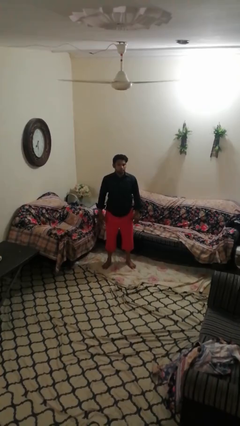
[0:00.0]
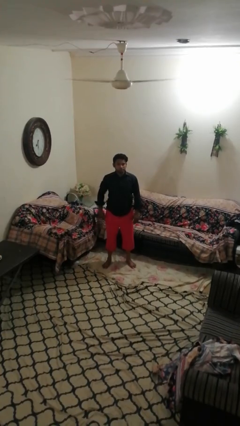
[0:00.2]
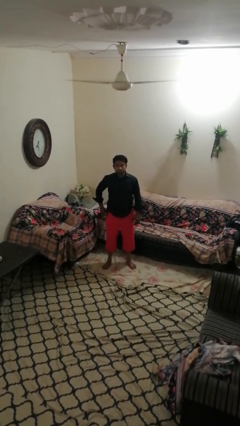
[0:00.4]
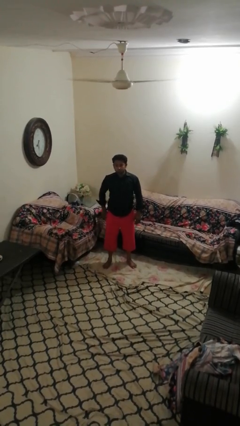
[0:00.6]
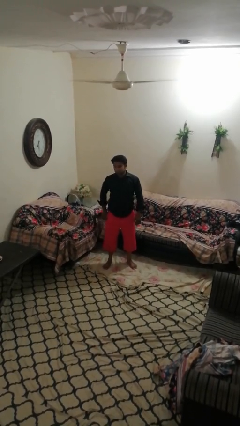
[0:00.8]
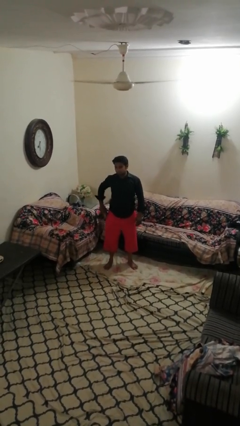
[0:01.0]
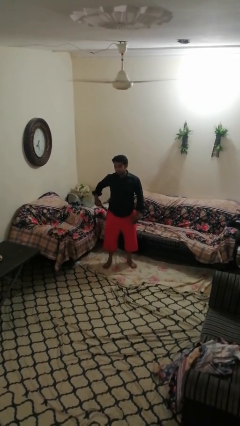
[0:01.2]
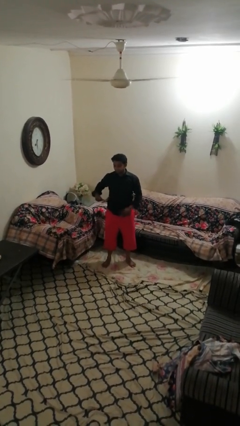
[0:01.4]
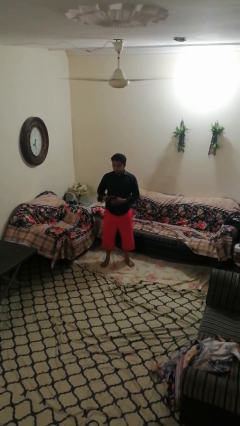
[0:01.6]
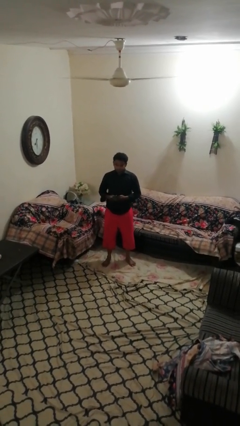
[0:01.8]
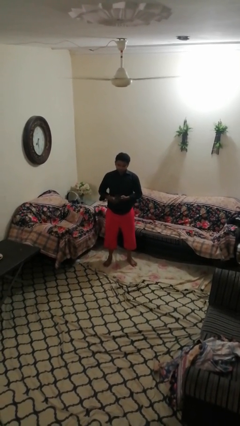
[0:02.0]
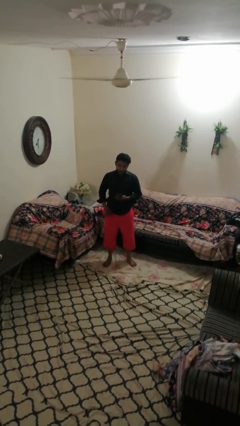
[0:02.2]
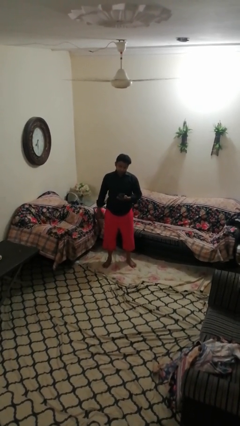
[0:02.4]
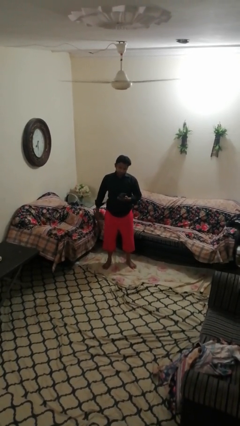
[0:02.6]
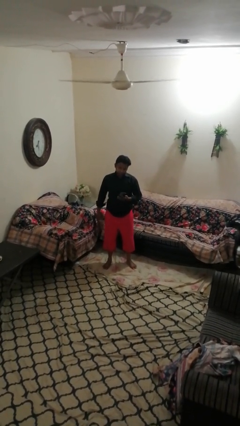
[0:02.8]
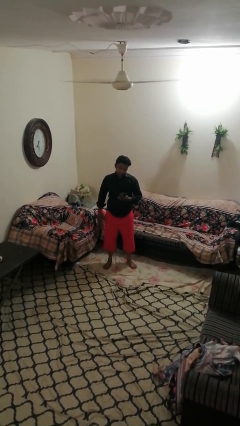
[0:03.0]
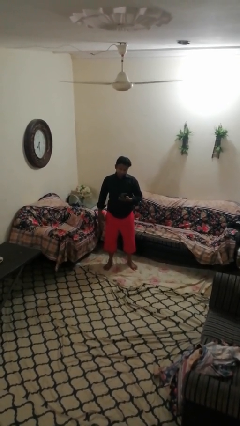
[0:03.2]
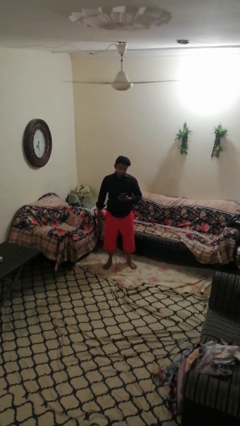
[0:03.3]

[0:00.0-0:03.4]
person takes phone from pocket

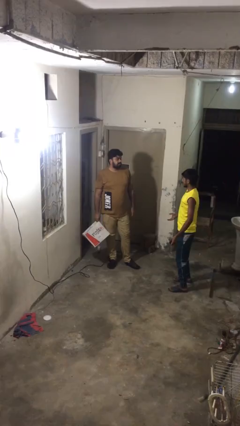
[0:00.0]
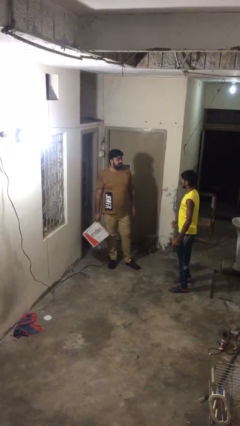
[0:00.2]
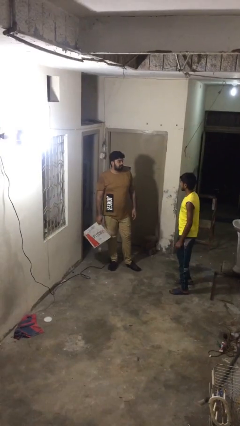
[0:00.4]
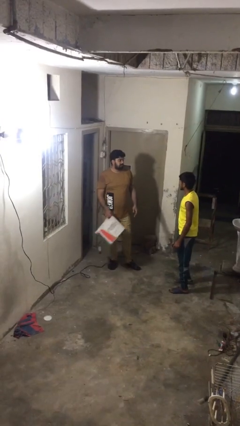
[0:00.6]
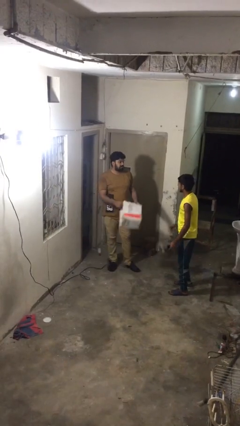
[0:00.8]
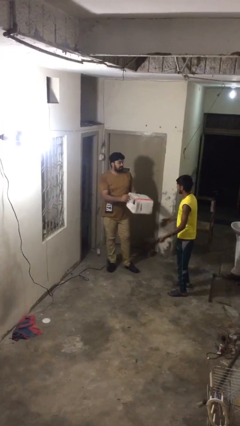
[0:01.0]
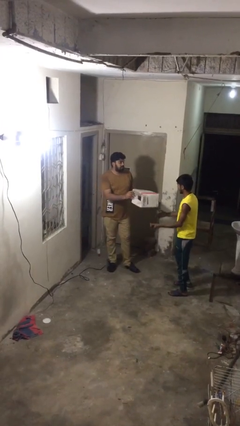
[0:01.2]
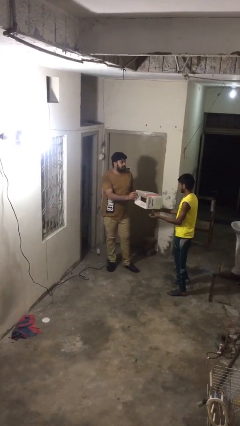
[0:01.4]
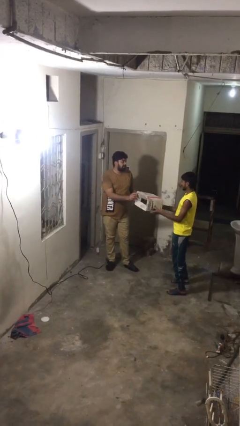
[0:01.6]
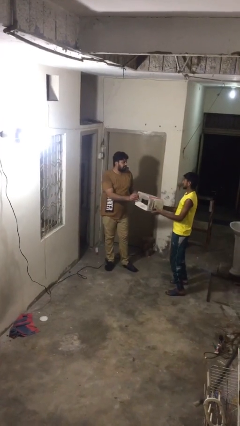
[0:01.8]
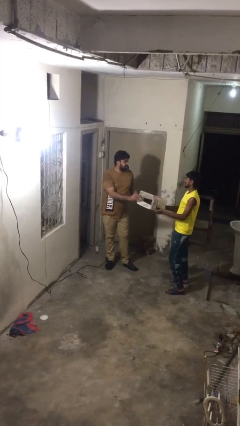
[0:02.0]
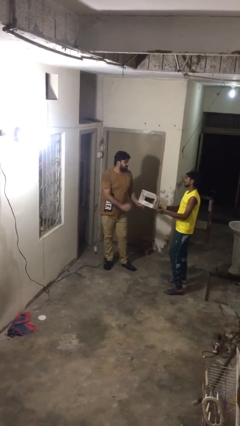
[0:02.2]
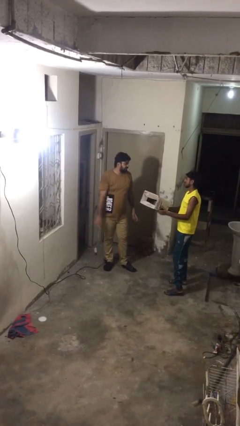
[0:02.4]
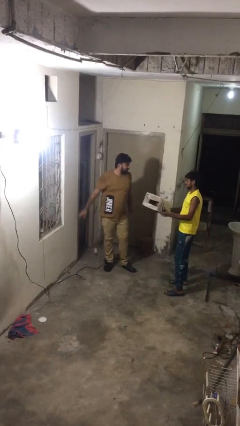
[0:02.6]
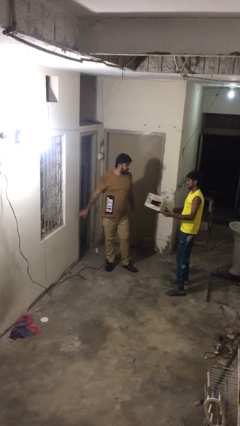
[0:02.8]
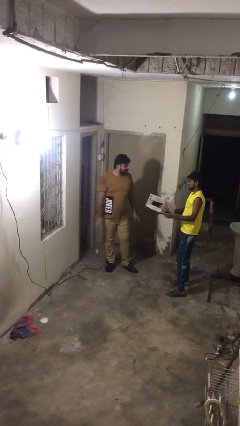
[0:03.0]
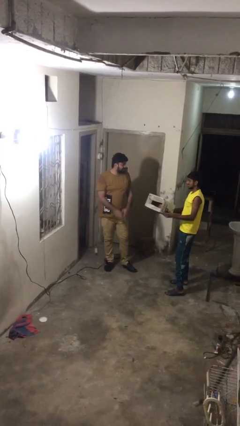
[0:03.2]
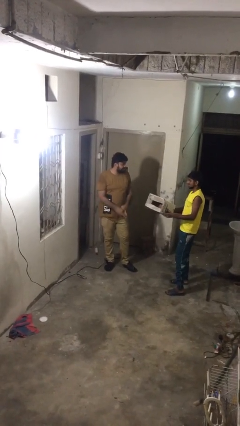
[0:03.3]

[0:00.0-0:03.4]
person transfers object to person

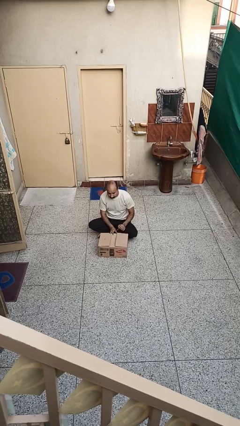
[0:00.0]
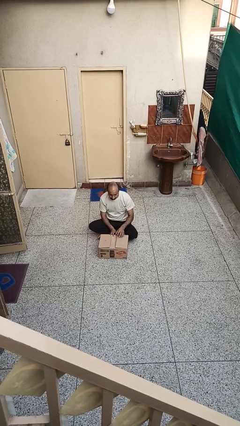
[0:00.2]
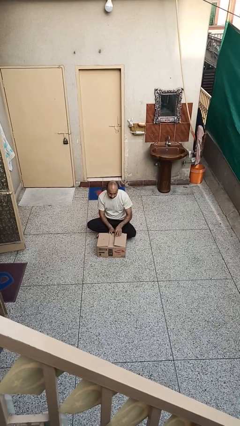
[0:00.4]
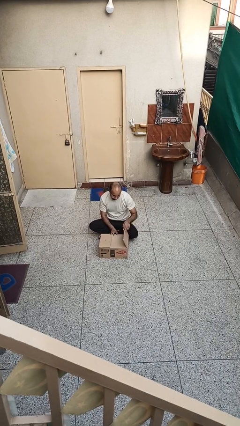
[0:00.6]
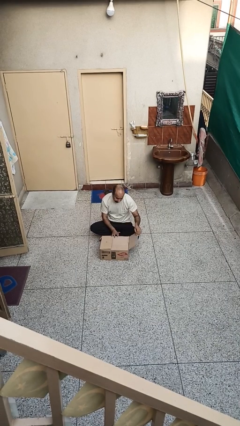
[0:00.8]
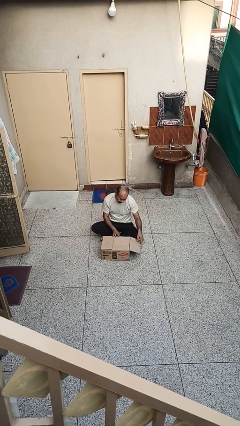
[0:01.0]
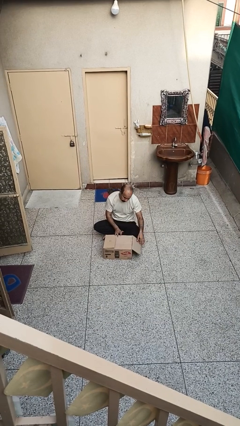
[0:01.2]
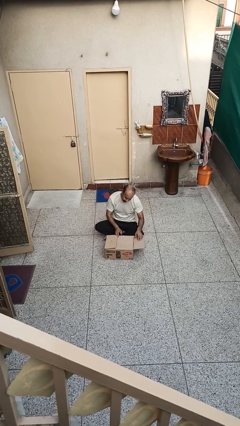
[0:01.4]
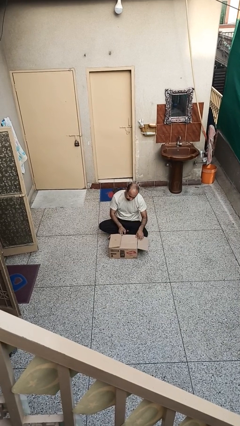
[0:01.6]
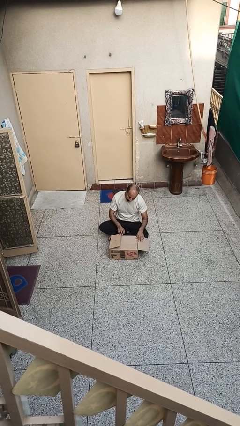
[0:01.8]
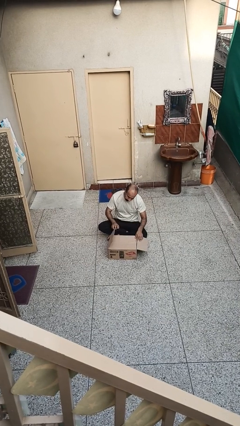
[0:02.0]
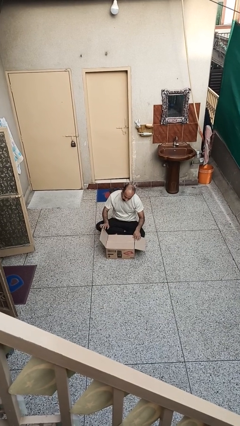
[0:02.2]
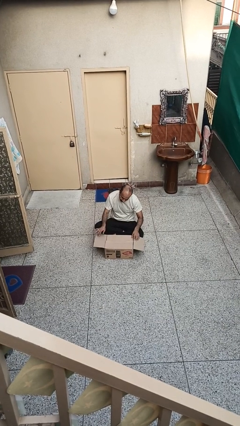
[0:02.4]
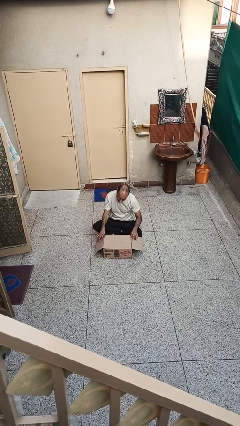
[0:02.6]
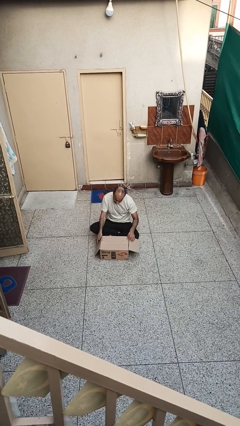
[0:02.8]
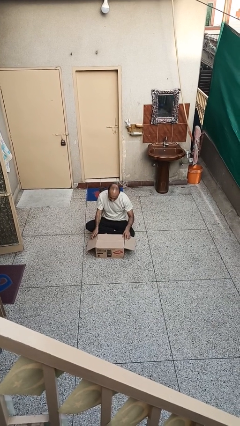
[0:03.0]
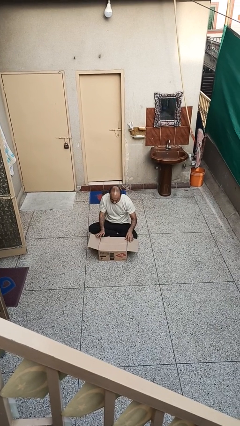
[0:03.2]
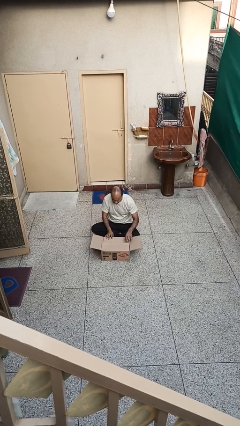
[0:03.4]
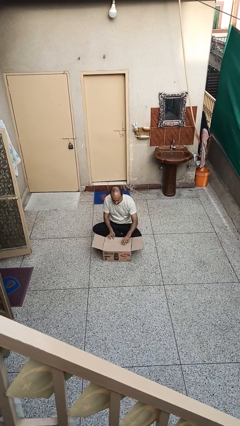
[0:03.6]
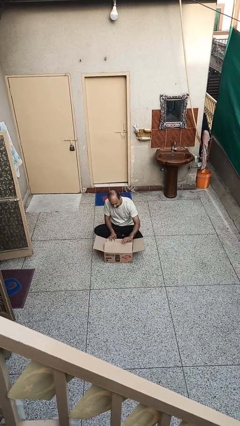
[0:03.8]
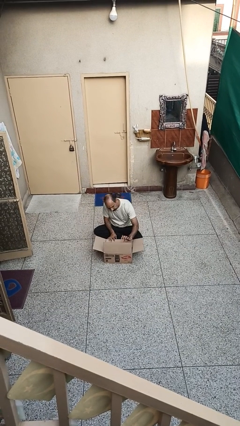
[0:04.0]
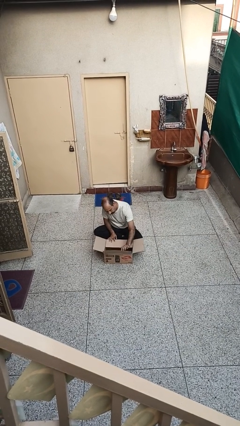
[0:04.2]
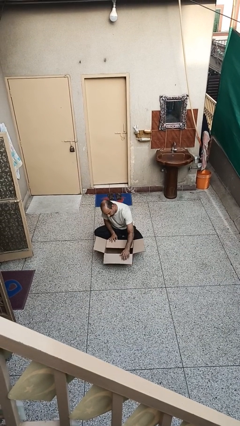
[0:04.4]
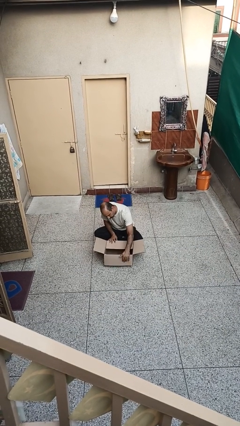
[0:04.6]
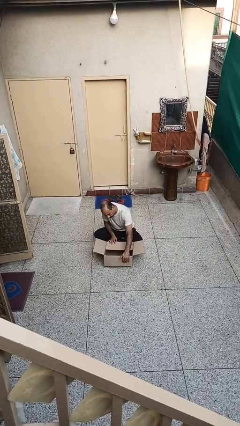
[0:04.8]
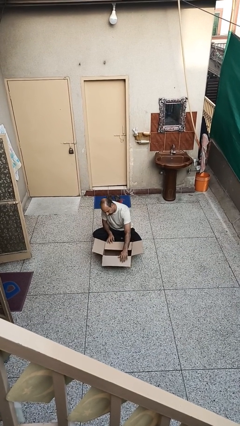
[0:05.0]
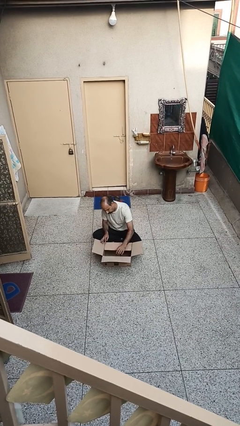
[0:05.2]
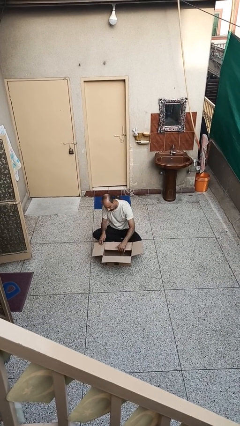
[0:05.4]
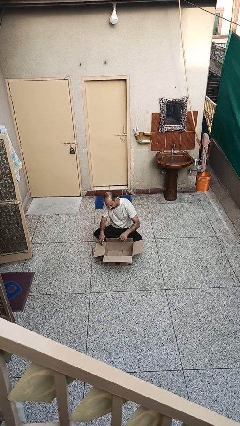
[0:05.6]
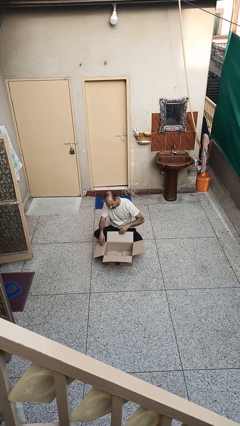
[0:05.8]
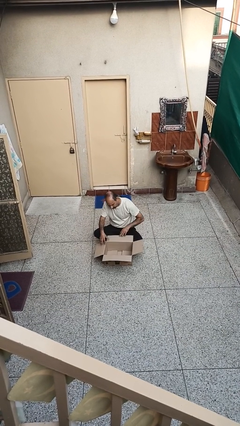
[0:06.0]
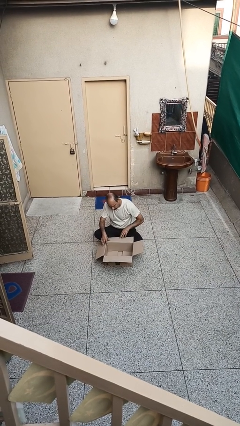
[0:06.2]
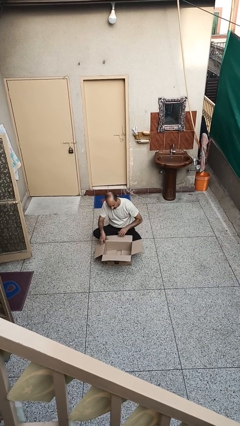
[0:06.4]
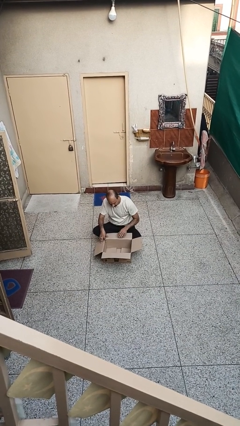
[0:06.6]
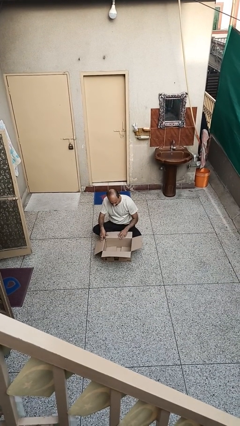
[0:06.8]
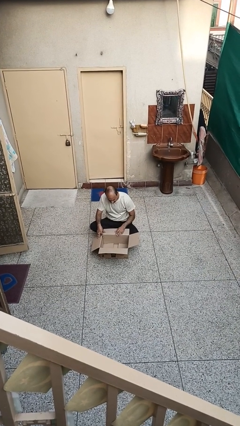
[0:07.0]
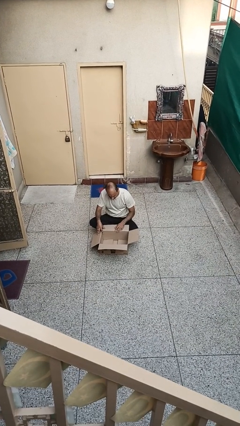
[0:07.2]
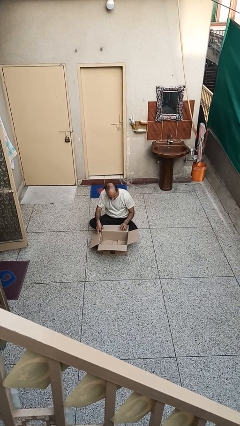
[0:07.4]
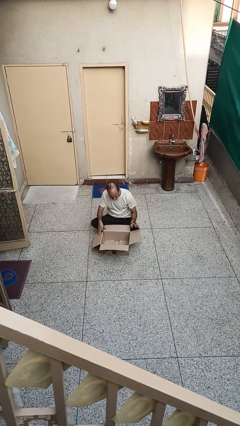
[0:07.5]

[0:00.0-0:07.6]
person opens box

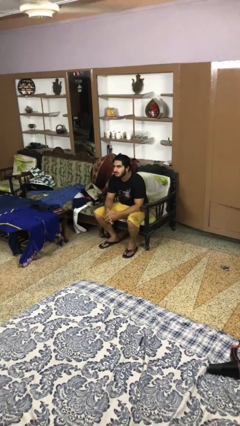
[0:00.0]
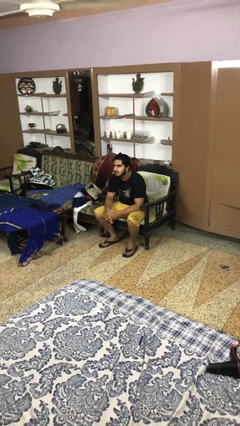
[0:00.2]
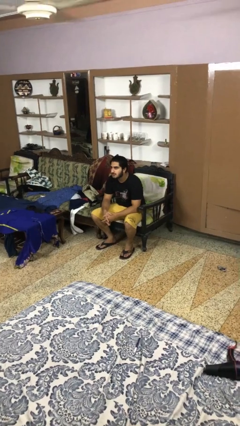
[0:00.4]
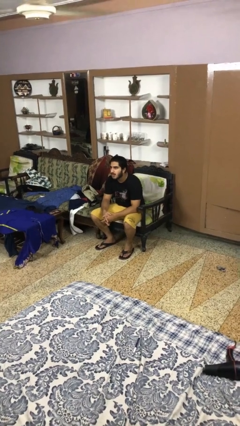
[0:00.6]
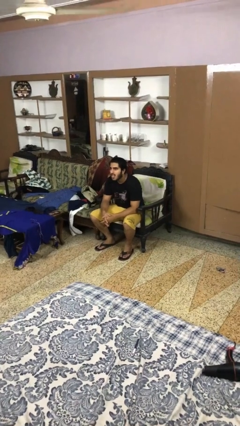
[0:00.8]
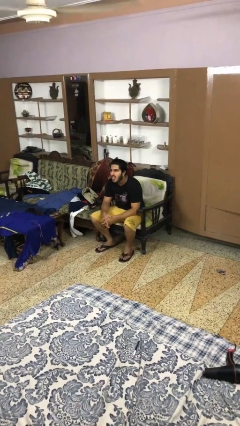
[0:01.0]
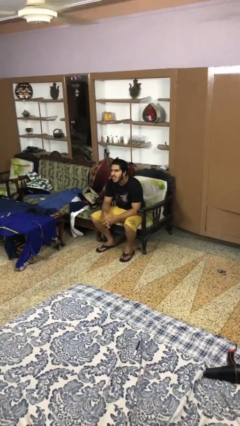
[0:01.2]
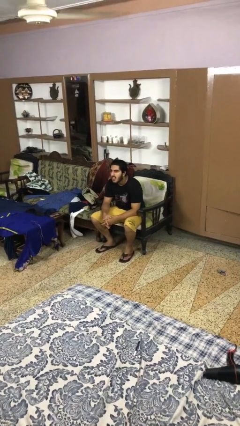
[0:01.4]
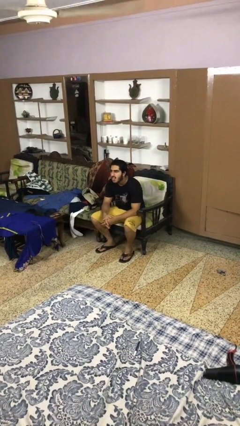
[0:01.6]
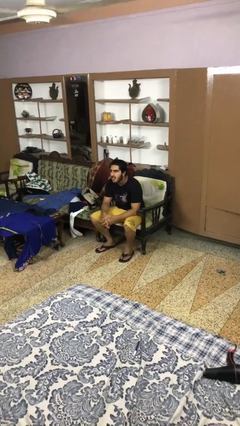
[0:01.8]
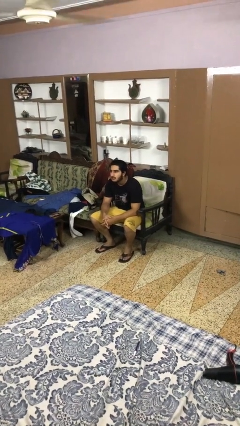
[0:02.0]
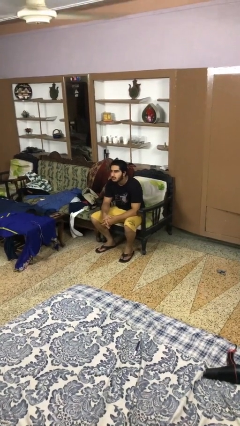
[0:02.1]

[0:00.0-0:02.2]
person sticks out tongue

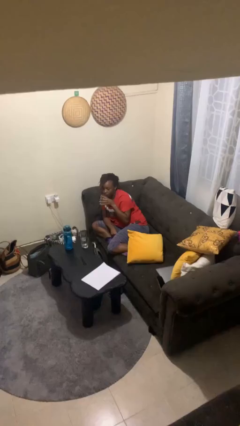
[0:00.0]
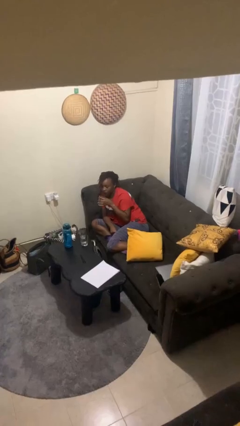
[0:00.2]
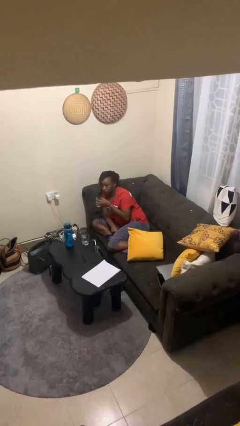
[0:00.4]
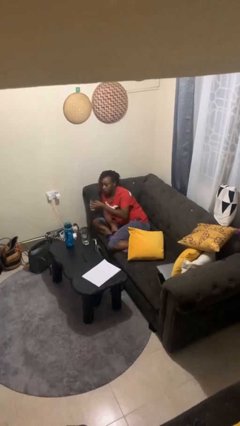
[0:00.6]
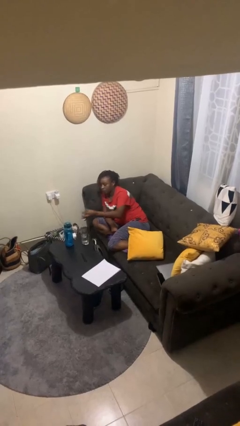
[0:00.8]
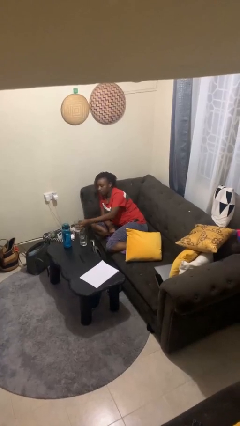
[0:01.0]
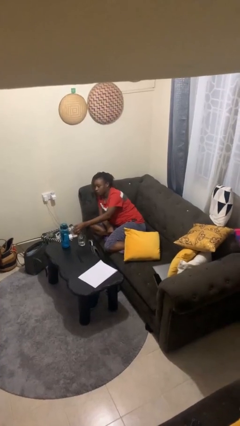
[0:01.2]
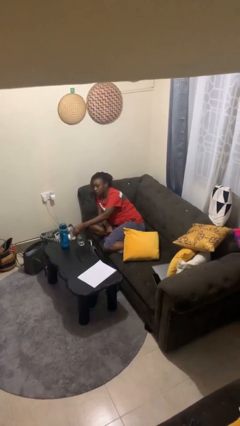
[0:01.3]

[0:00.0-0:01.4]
person puts down object on table
